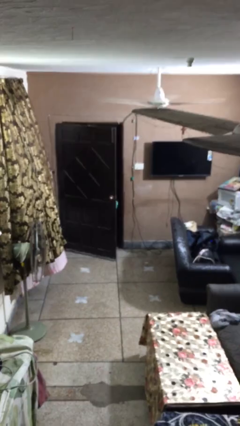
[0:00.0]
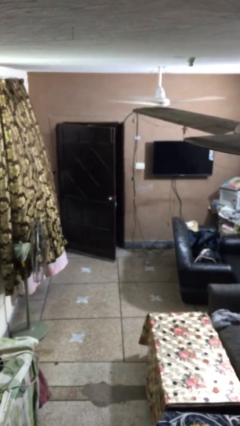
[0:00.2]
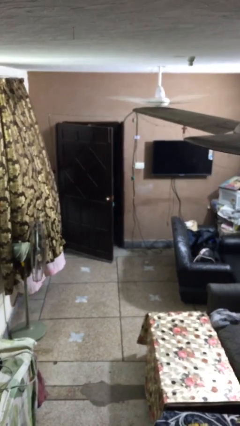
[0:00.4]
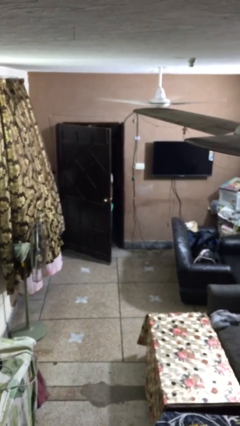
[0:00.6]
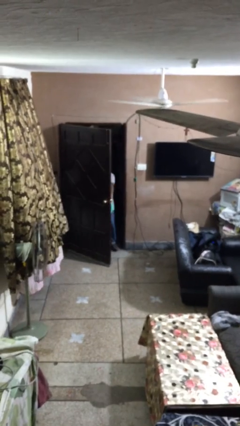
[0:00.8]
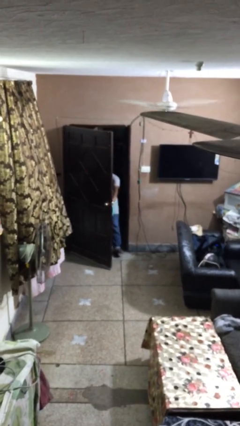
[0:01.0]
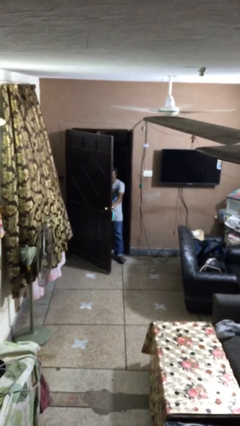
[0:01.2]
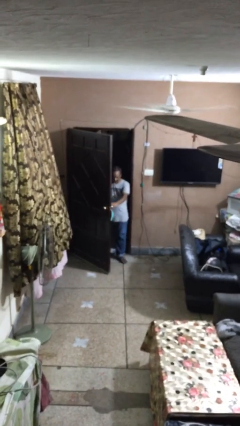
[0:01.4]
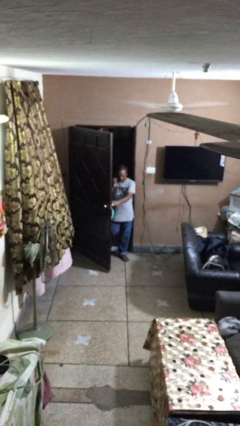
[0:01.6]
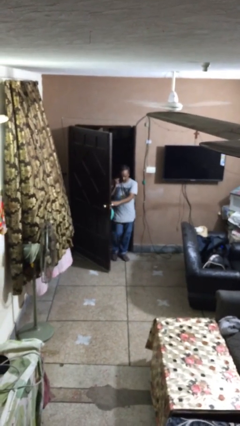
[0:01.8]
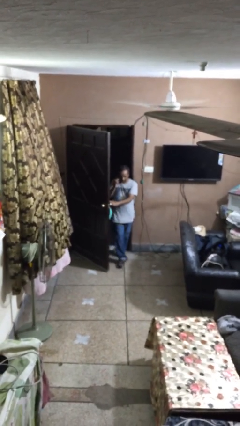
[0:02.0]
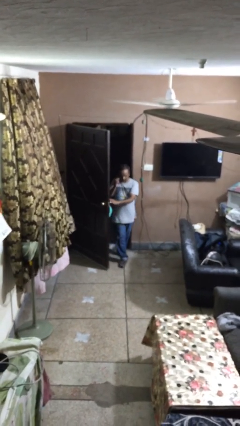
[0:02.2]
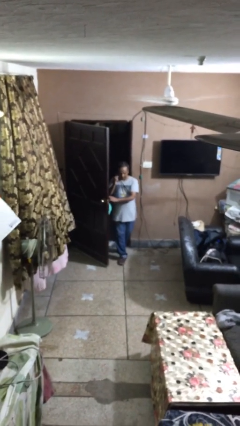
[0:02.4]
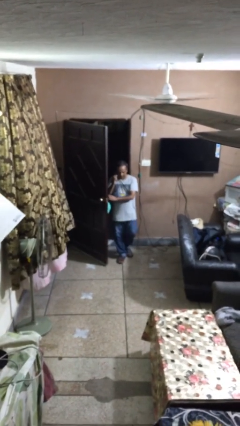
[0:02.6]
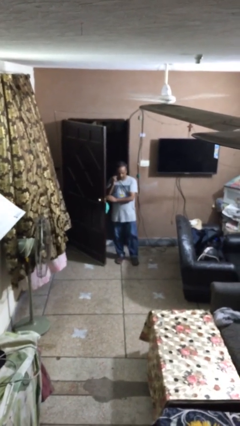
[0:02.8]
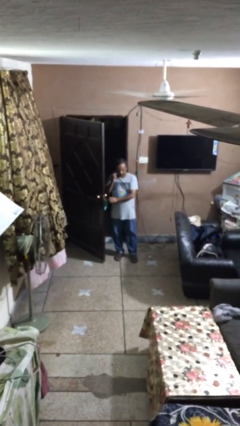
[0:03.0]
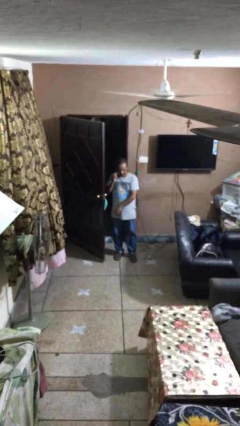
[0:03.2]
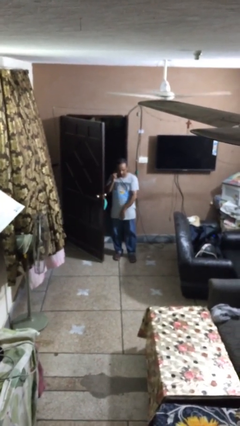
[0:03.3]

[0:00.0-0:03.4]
person enters scene through structure

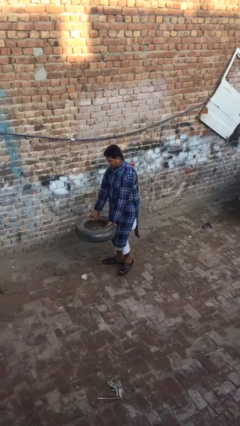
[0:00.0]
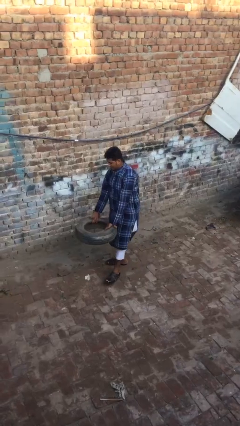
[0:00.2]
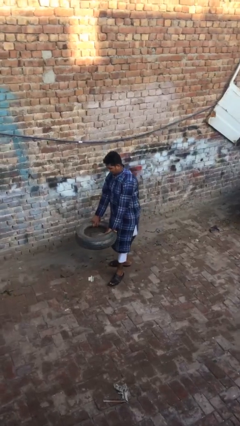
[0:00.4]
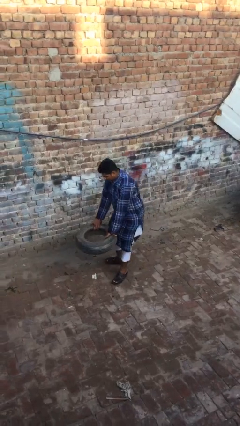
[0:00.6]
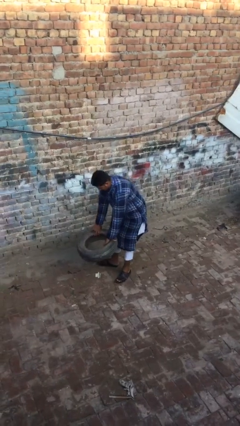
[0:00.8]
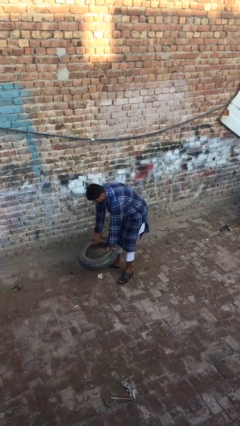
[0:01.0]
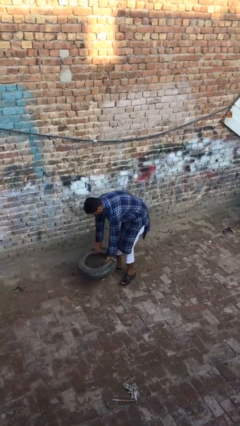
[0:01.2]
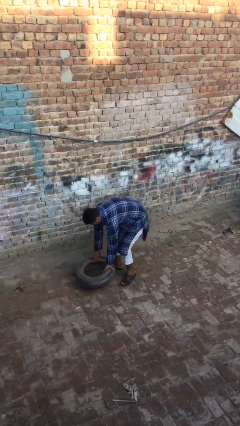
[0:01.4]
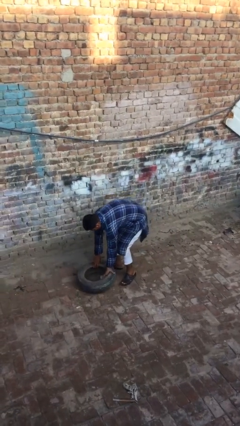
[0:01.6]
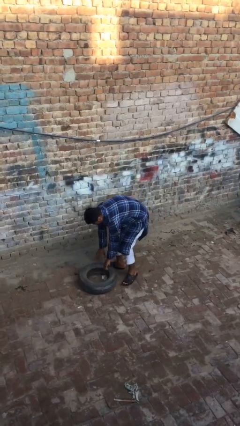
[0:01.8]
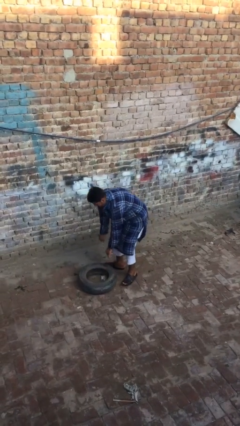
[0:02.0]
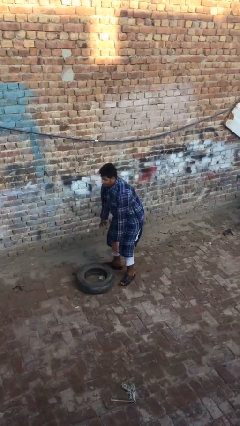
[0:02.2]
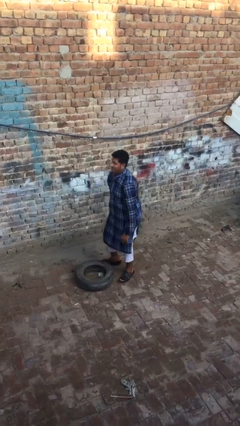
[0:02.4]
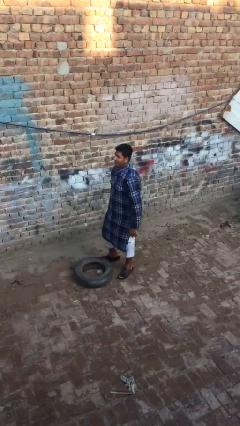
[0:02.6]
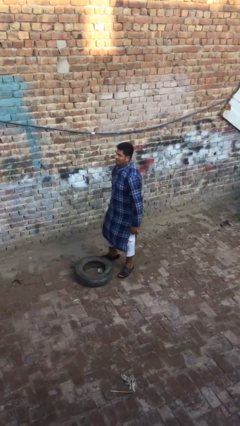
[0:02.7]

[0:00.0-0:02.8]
person puts down object on floor

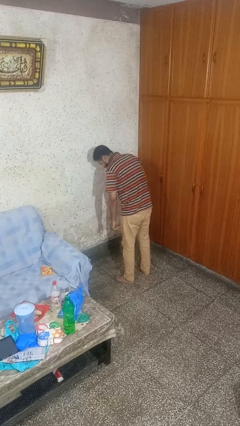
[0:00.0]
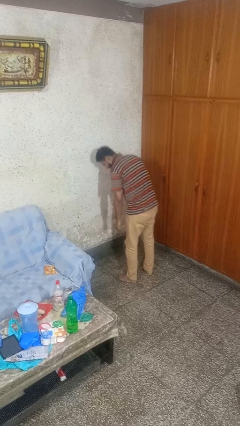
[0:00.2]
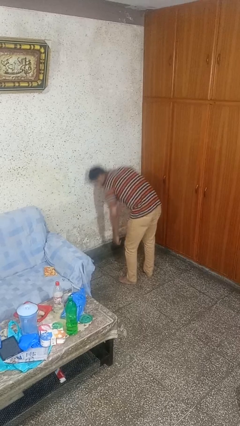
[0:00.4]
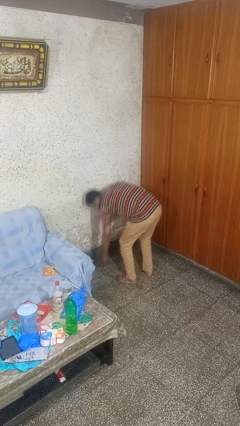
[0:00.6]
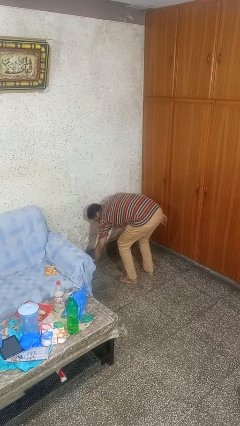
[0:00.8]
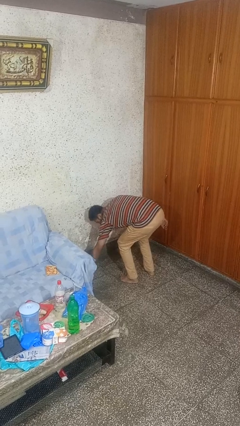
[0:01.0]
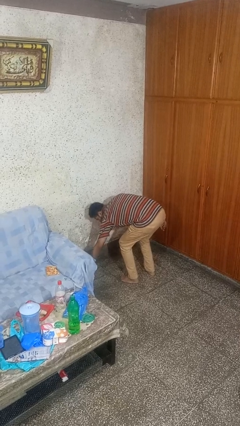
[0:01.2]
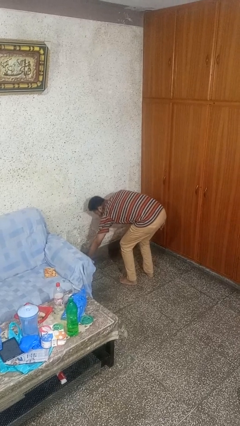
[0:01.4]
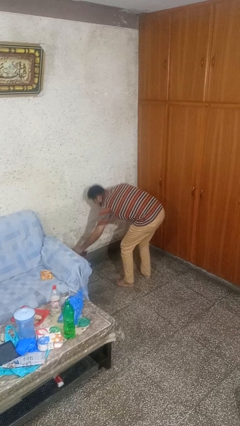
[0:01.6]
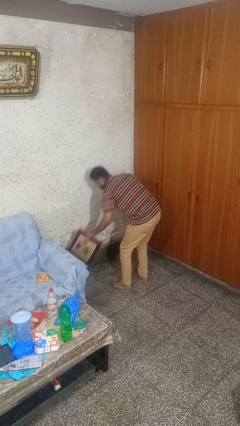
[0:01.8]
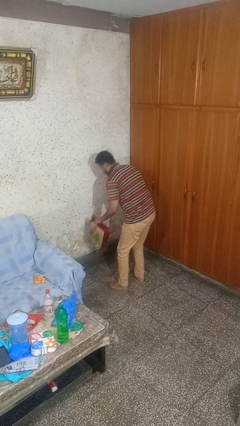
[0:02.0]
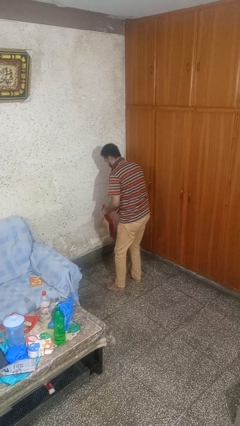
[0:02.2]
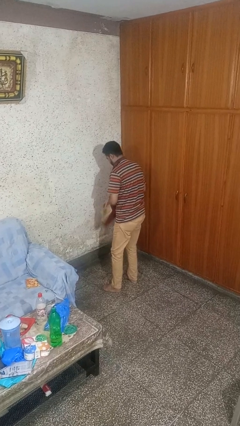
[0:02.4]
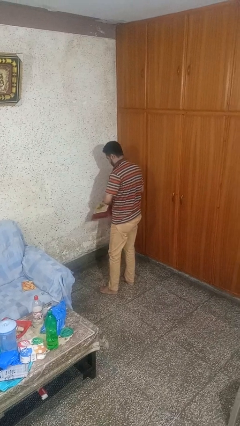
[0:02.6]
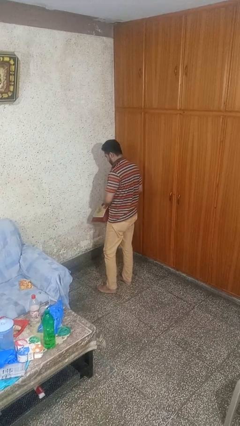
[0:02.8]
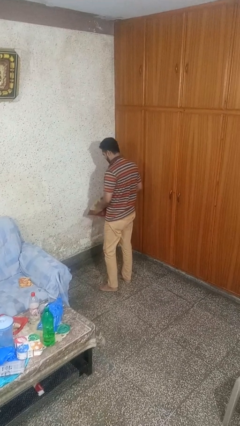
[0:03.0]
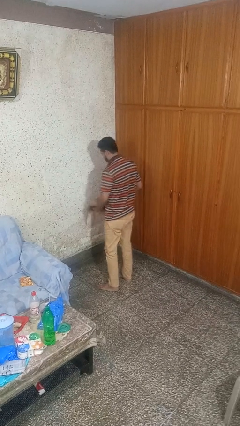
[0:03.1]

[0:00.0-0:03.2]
person picks up object from floor

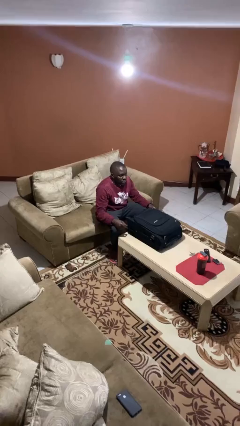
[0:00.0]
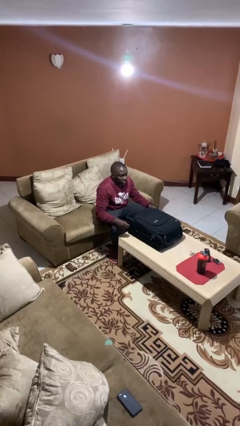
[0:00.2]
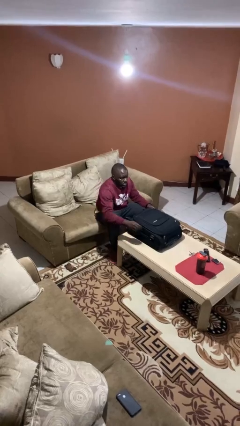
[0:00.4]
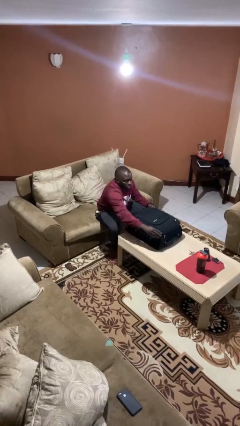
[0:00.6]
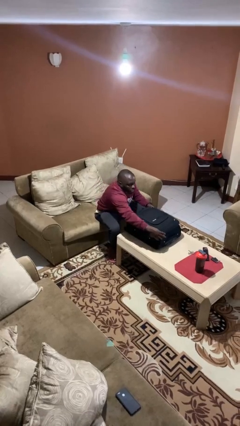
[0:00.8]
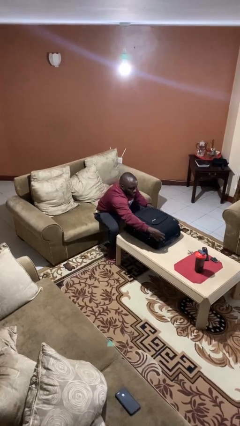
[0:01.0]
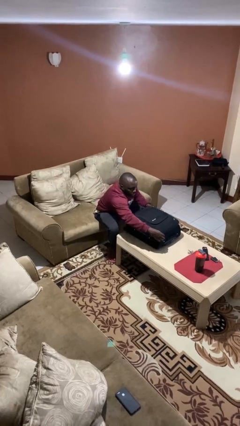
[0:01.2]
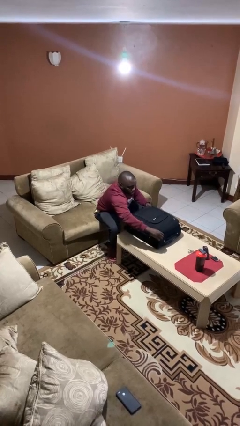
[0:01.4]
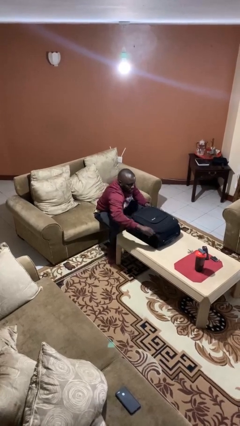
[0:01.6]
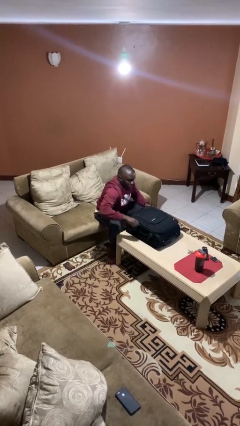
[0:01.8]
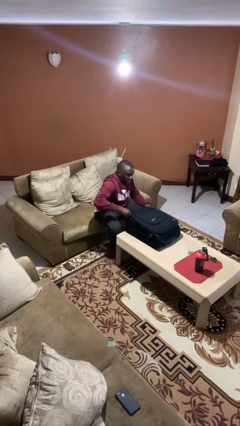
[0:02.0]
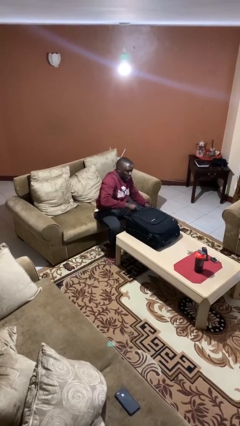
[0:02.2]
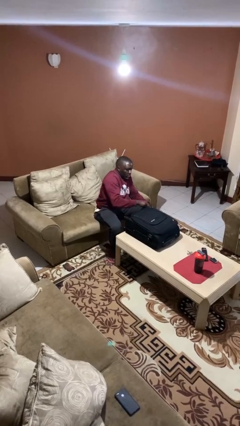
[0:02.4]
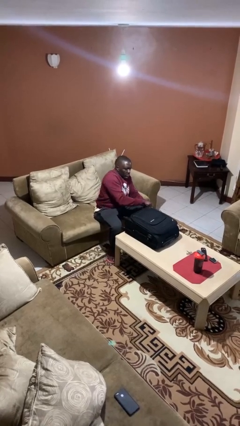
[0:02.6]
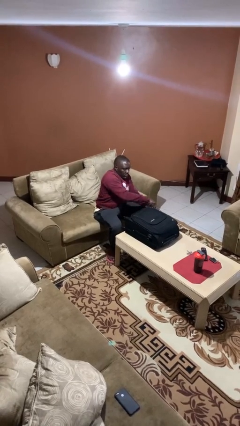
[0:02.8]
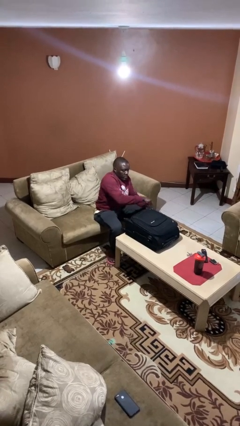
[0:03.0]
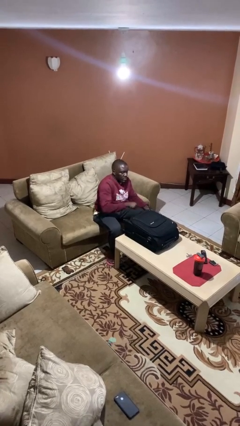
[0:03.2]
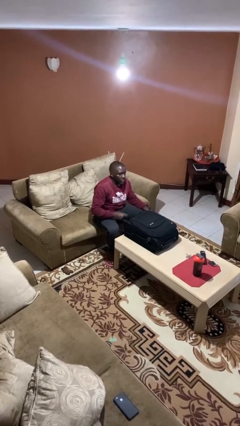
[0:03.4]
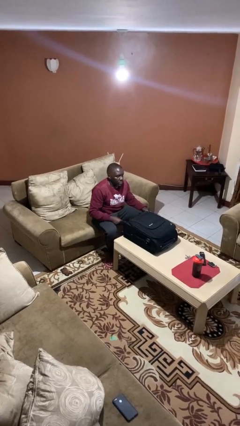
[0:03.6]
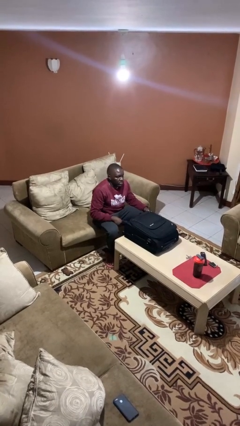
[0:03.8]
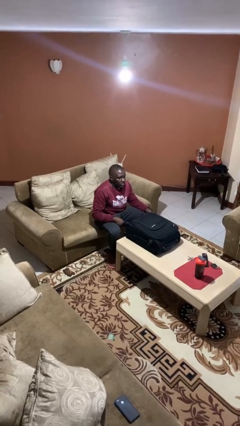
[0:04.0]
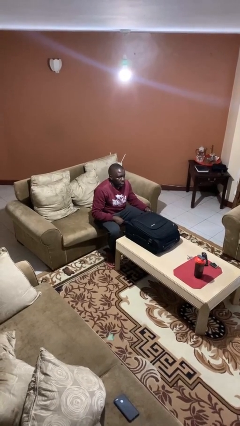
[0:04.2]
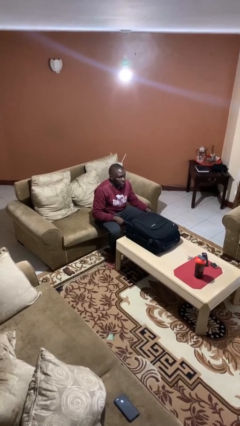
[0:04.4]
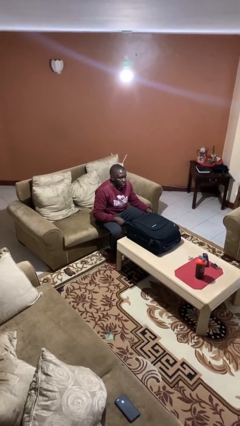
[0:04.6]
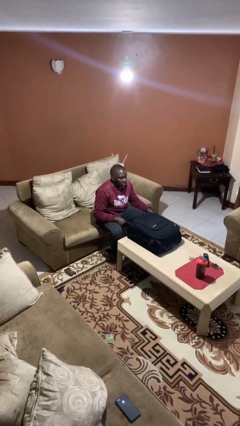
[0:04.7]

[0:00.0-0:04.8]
person opens suitcase

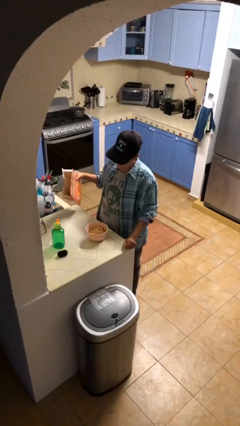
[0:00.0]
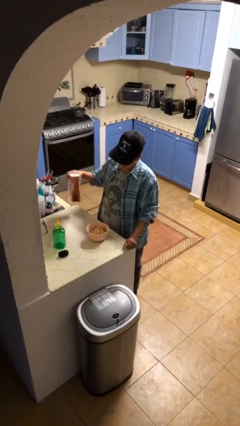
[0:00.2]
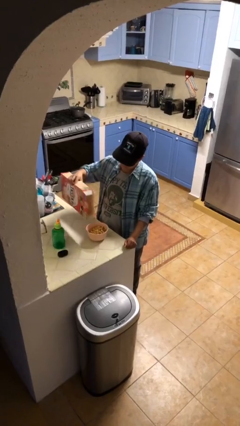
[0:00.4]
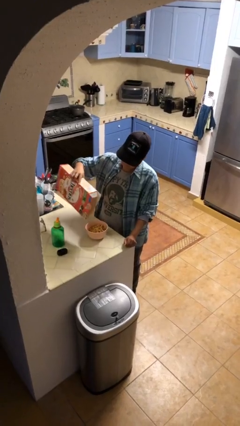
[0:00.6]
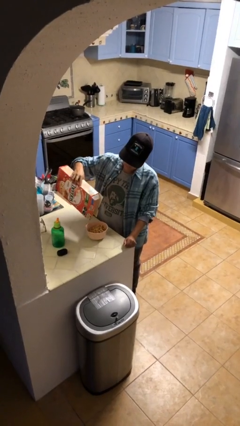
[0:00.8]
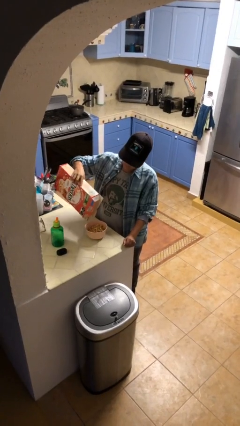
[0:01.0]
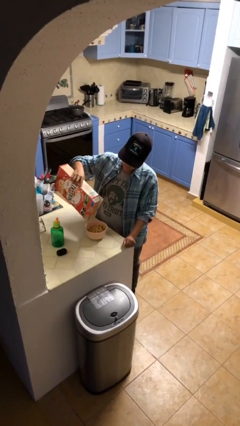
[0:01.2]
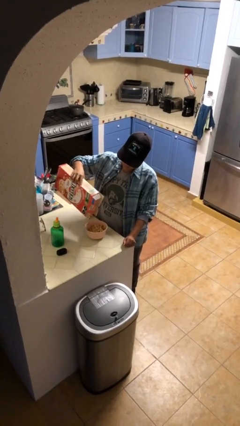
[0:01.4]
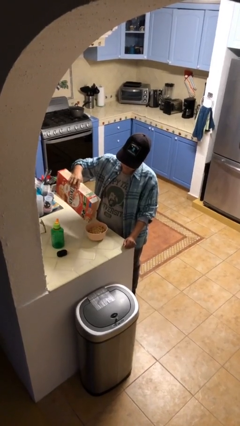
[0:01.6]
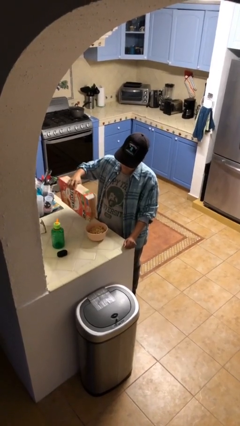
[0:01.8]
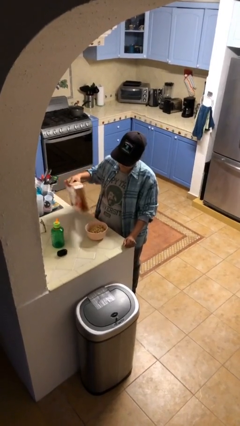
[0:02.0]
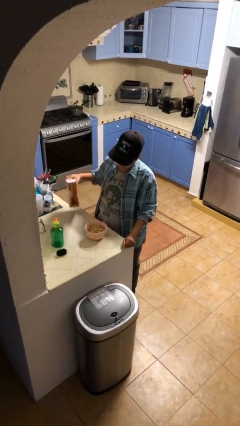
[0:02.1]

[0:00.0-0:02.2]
person pours into bowl

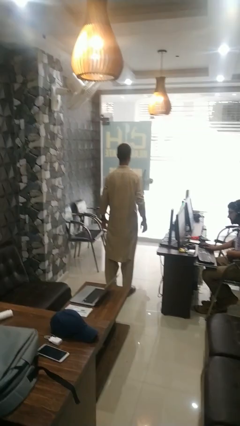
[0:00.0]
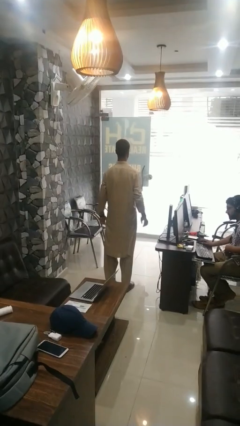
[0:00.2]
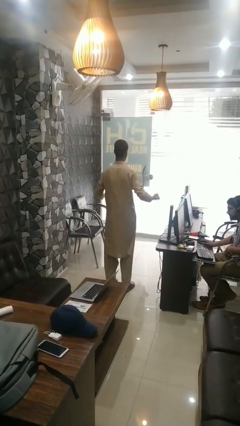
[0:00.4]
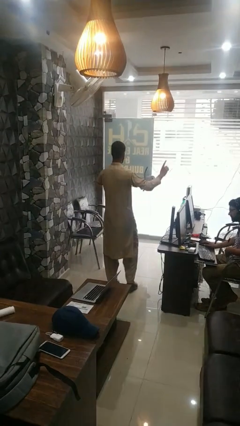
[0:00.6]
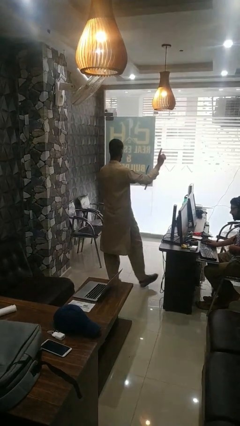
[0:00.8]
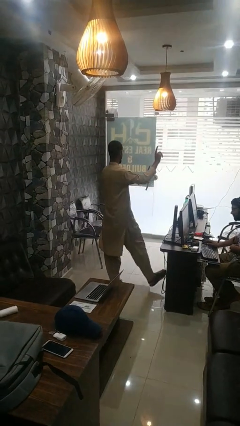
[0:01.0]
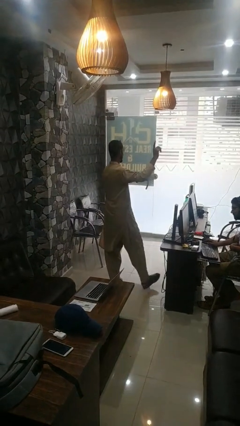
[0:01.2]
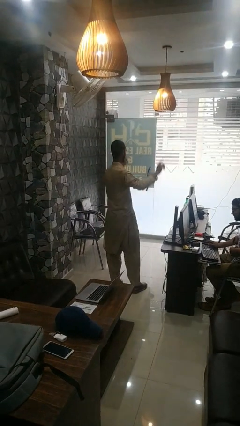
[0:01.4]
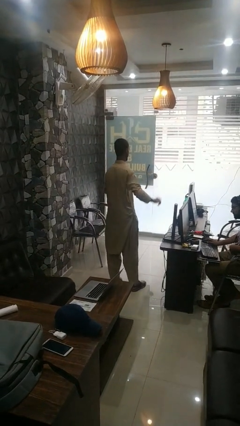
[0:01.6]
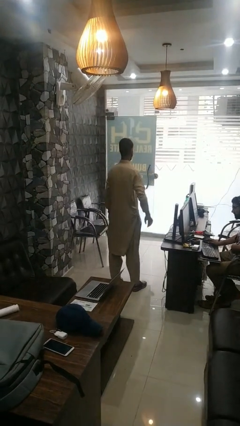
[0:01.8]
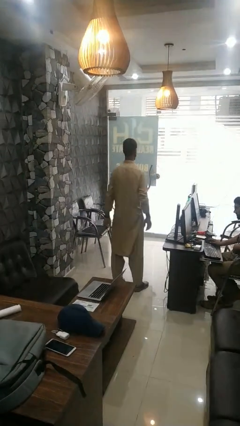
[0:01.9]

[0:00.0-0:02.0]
person dances in place
